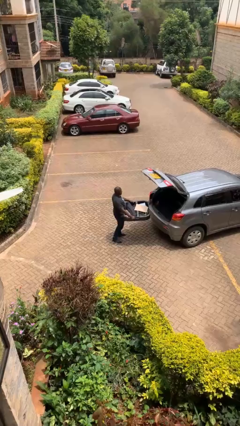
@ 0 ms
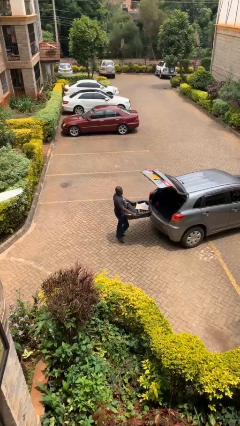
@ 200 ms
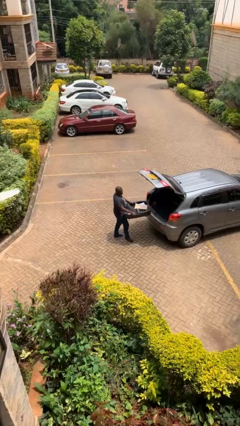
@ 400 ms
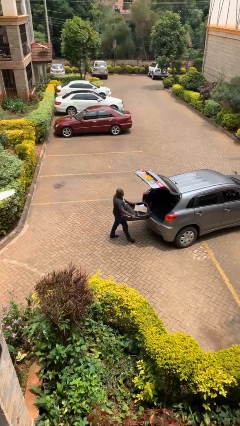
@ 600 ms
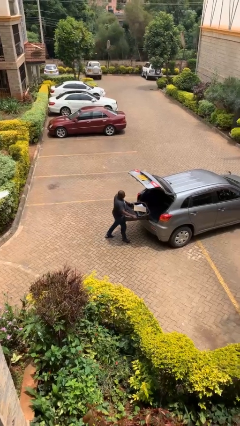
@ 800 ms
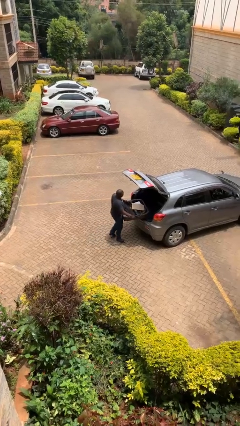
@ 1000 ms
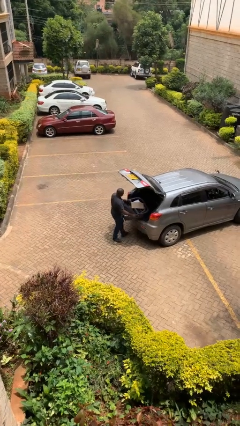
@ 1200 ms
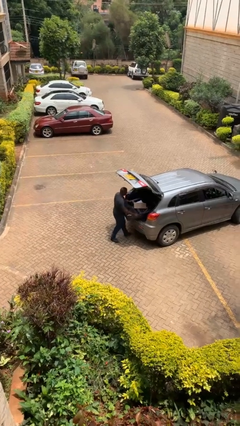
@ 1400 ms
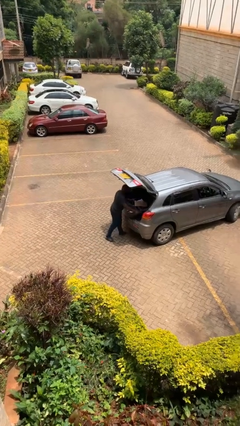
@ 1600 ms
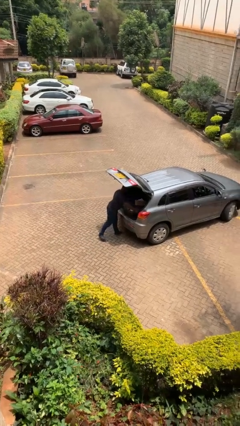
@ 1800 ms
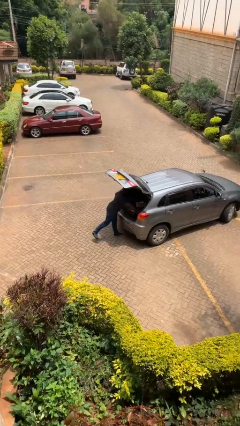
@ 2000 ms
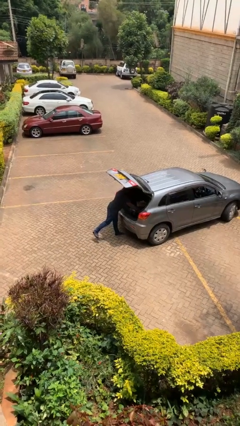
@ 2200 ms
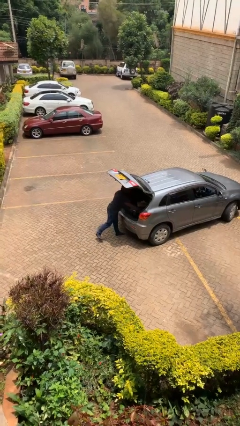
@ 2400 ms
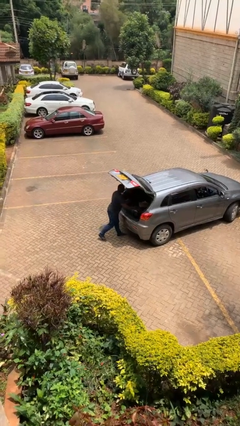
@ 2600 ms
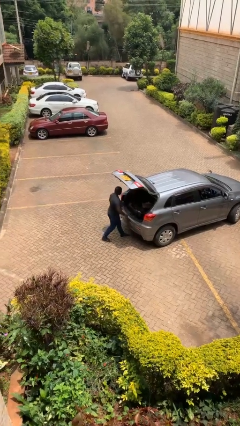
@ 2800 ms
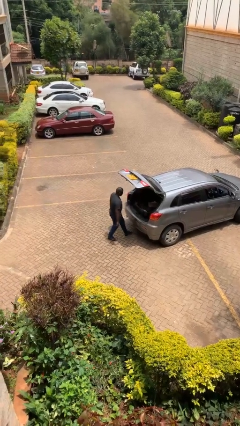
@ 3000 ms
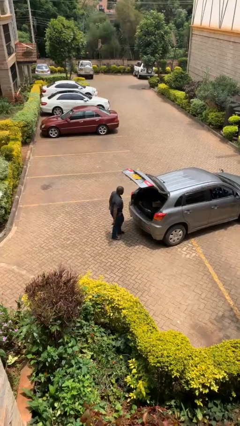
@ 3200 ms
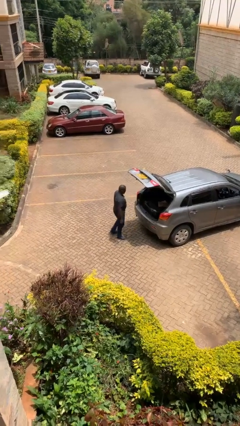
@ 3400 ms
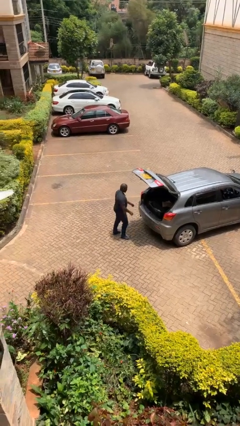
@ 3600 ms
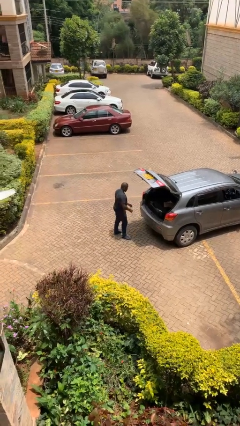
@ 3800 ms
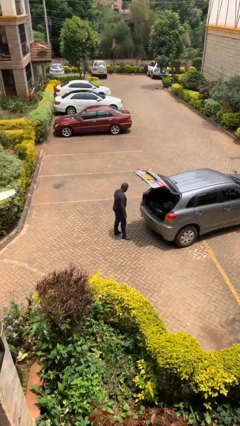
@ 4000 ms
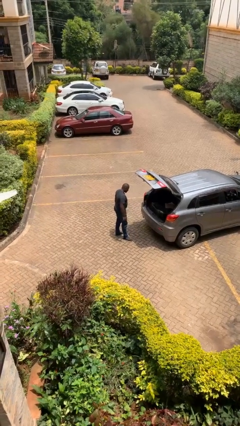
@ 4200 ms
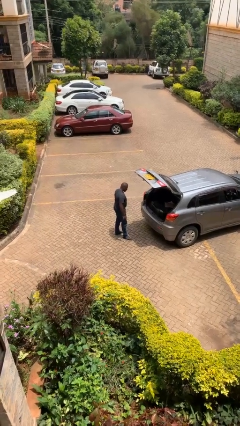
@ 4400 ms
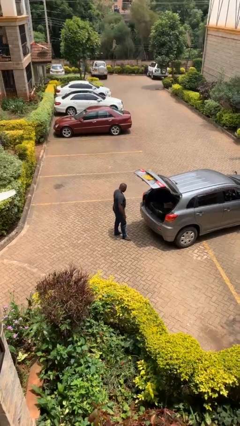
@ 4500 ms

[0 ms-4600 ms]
person loads car

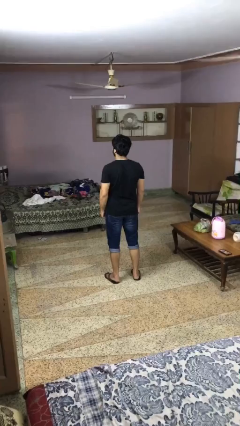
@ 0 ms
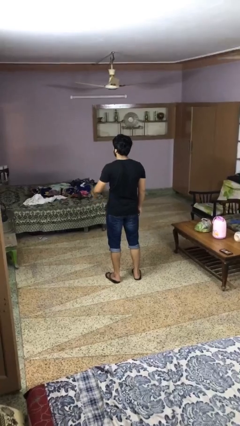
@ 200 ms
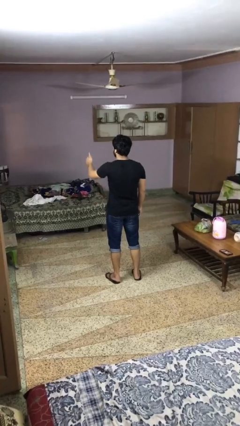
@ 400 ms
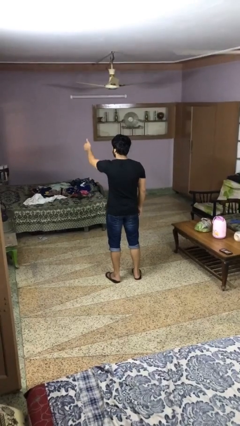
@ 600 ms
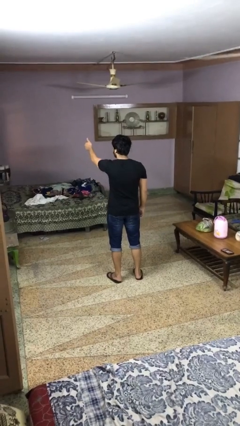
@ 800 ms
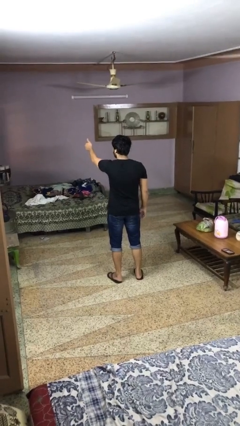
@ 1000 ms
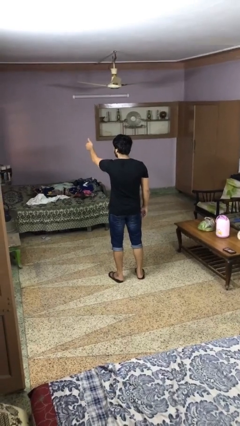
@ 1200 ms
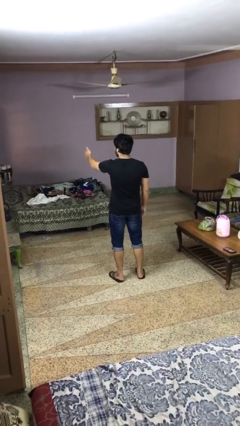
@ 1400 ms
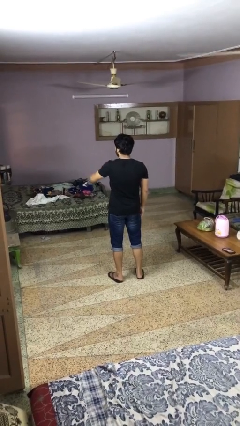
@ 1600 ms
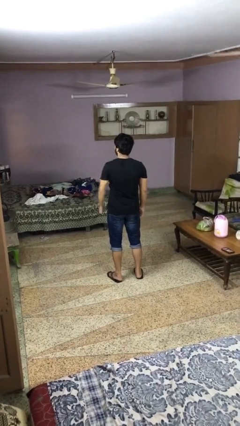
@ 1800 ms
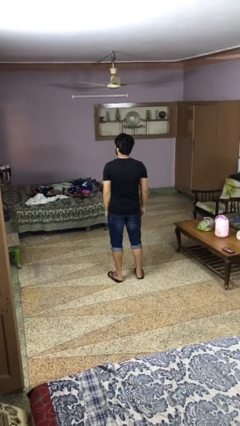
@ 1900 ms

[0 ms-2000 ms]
person gestures thumbs up

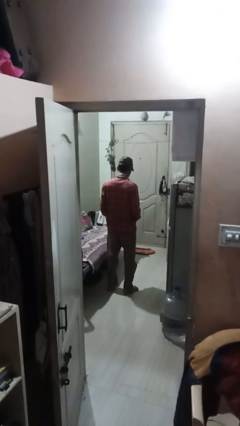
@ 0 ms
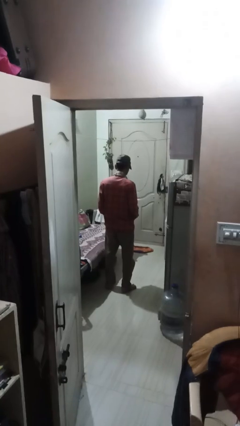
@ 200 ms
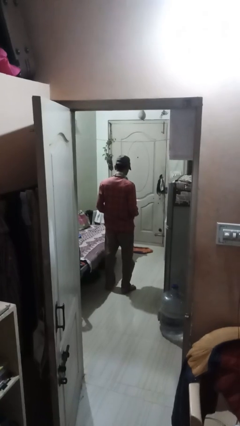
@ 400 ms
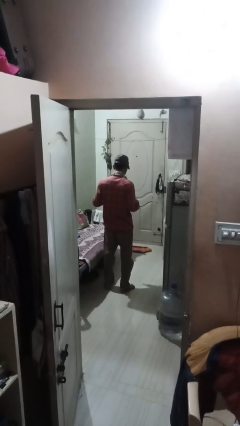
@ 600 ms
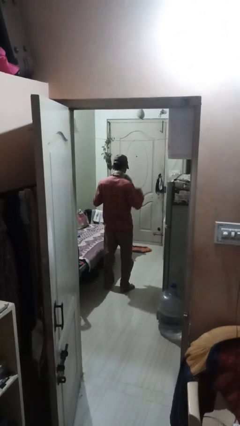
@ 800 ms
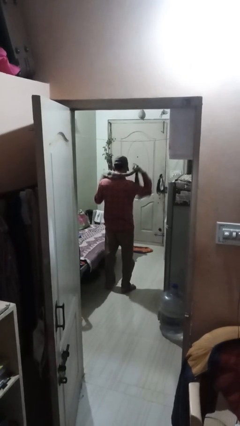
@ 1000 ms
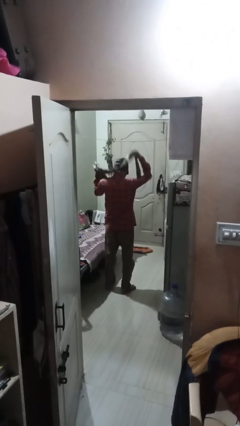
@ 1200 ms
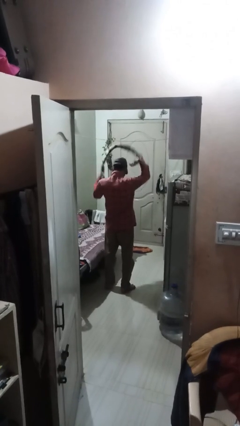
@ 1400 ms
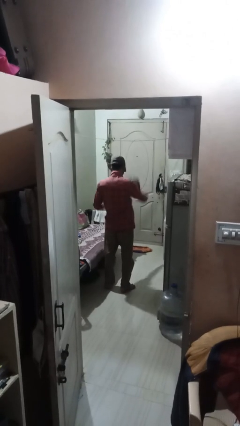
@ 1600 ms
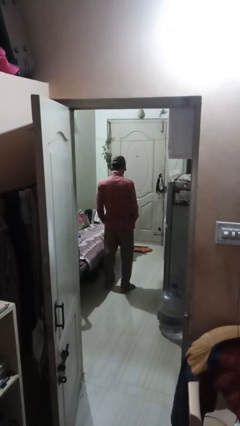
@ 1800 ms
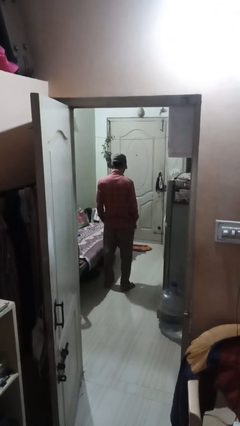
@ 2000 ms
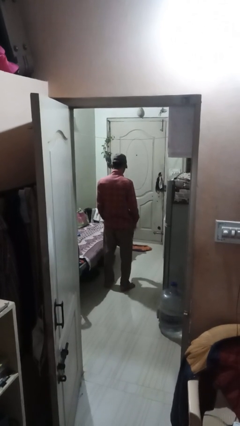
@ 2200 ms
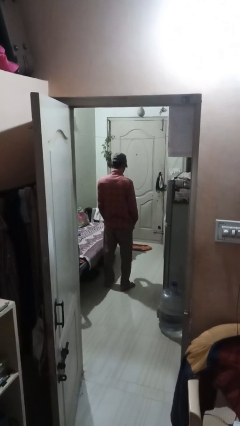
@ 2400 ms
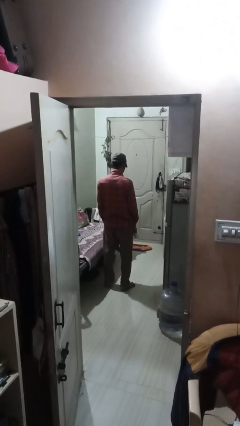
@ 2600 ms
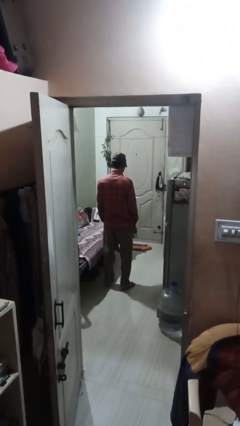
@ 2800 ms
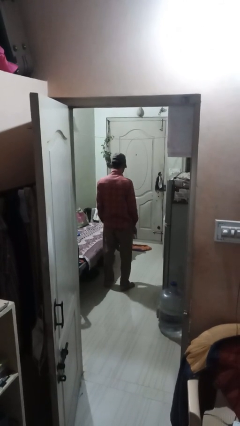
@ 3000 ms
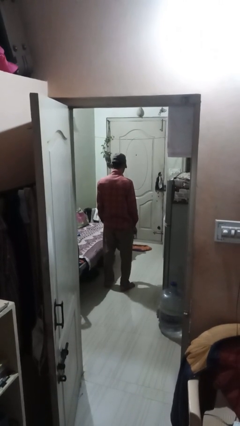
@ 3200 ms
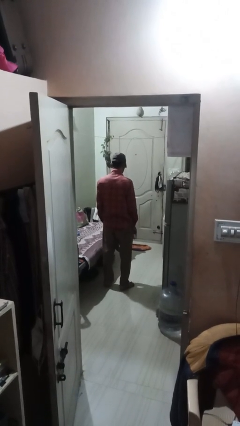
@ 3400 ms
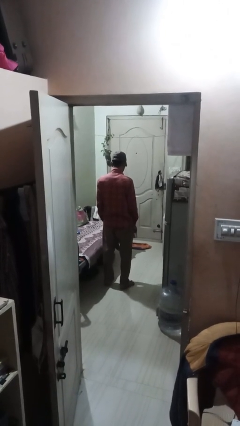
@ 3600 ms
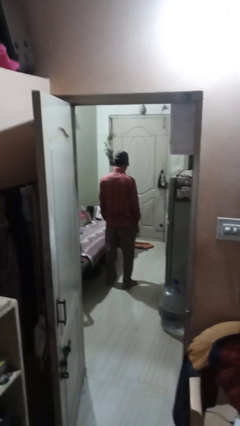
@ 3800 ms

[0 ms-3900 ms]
person takes off scarf

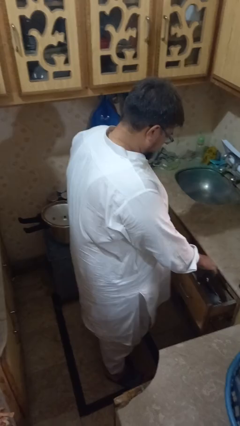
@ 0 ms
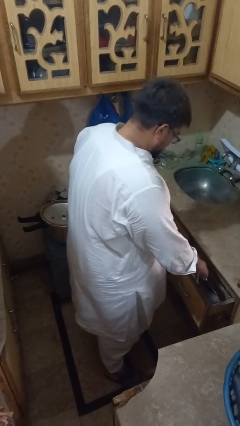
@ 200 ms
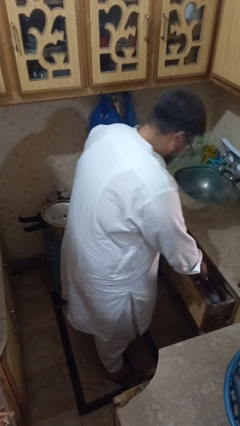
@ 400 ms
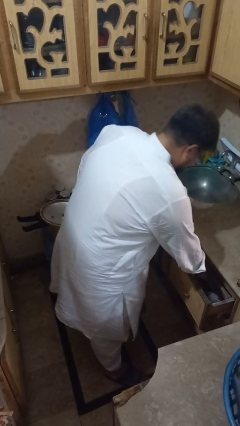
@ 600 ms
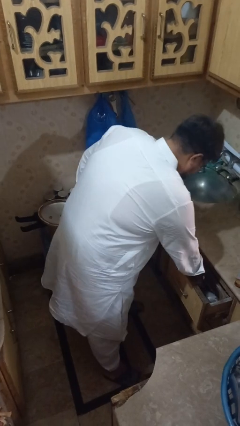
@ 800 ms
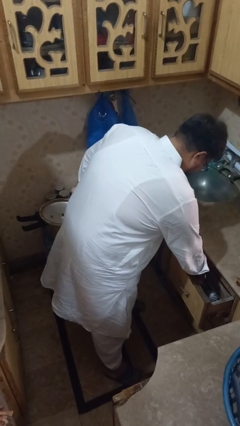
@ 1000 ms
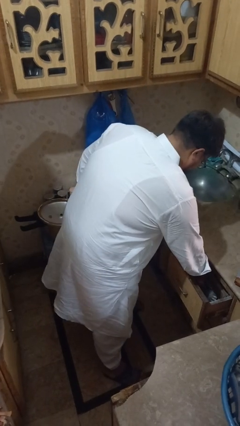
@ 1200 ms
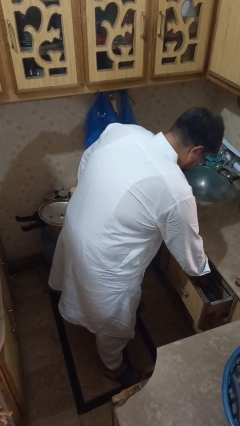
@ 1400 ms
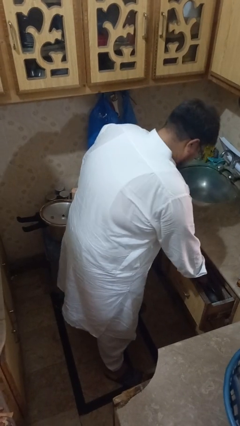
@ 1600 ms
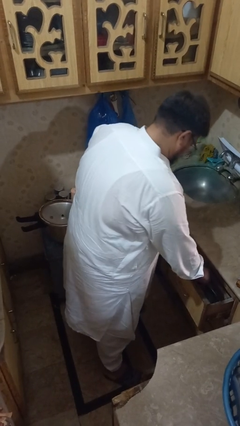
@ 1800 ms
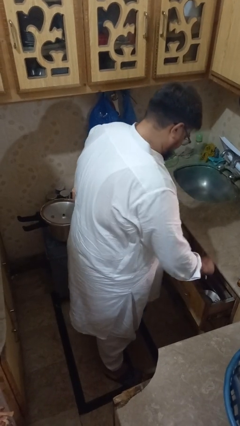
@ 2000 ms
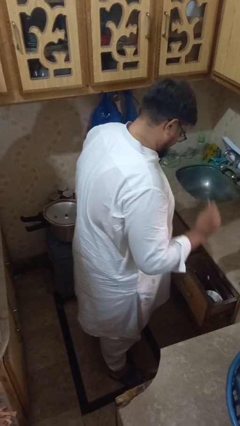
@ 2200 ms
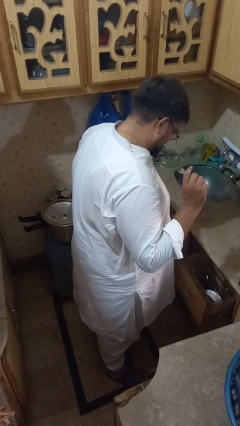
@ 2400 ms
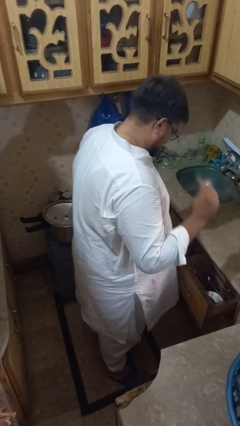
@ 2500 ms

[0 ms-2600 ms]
person searches in kitchen drawer

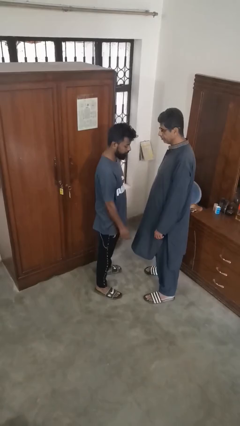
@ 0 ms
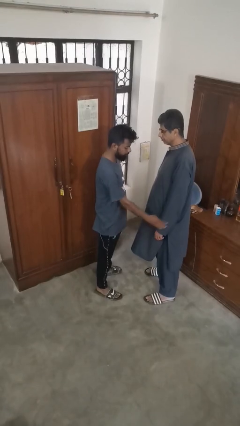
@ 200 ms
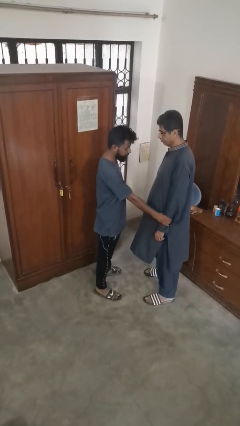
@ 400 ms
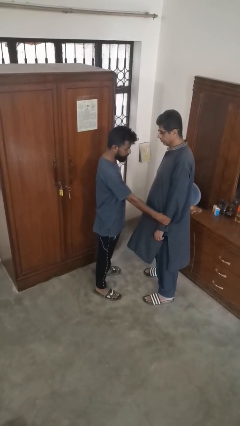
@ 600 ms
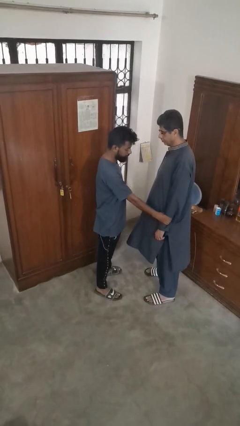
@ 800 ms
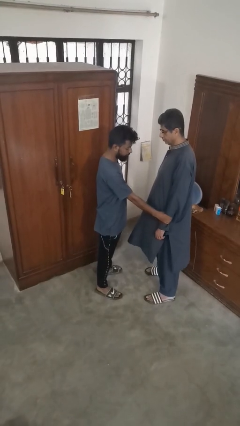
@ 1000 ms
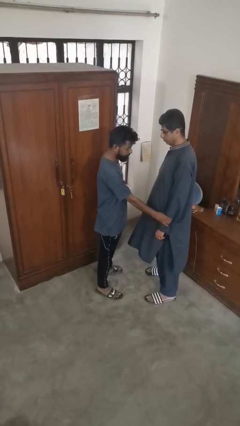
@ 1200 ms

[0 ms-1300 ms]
person grabs person by forearm

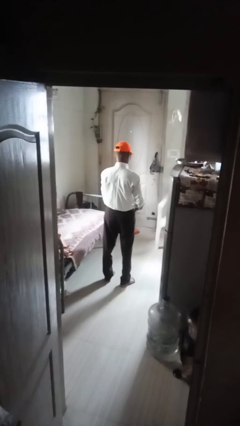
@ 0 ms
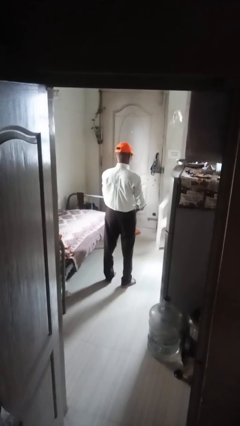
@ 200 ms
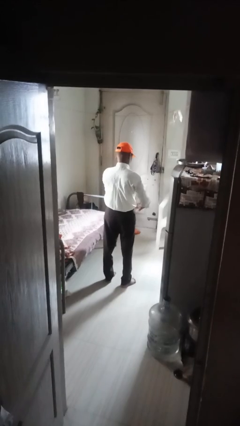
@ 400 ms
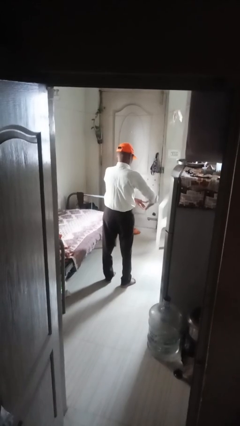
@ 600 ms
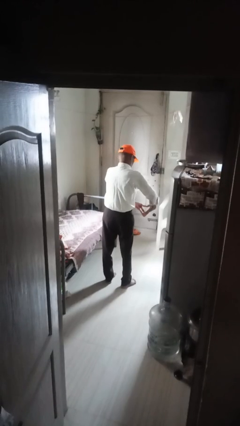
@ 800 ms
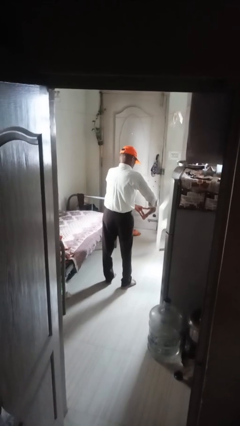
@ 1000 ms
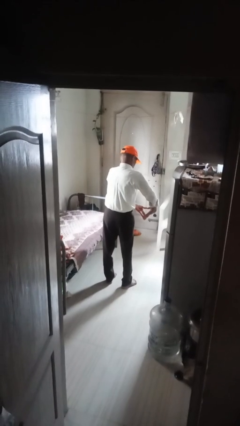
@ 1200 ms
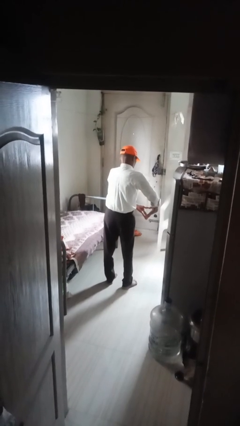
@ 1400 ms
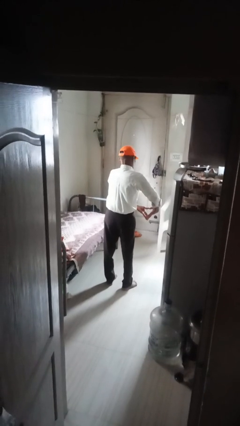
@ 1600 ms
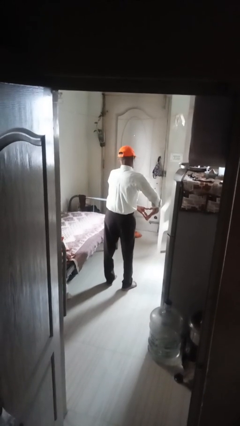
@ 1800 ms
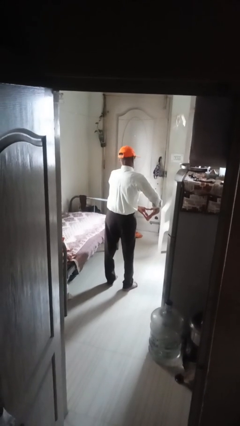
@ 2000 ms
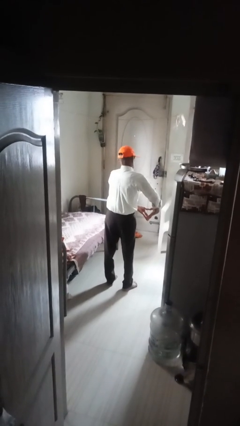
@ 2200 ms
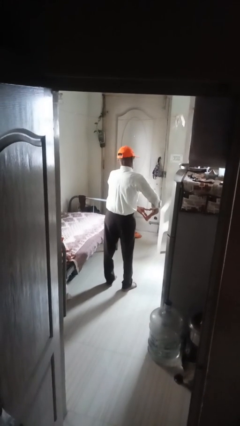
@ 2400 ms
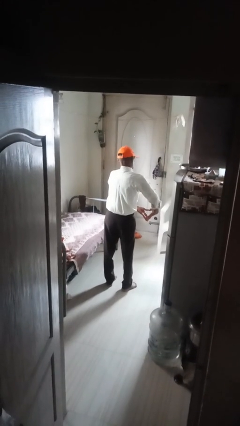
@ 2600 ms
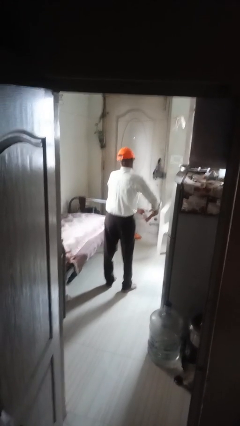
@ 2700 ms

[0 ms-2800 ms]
person gestures heart
